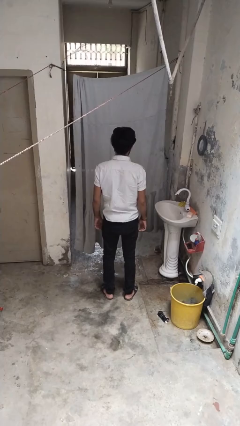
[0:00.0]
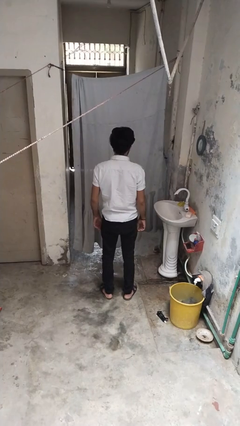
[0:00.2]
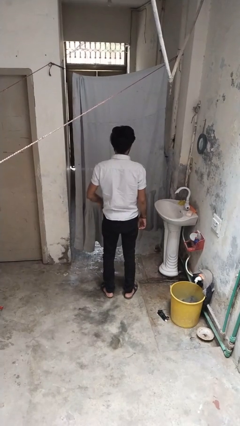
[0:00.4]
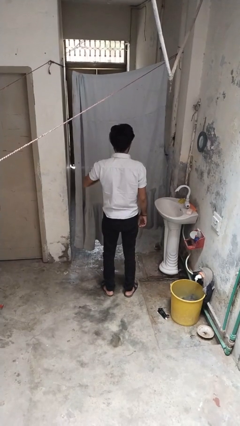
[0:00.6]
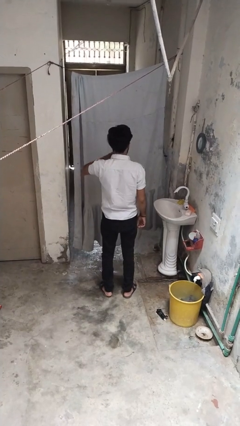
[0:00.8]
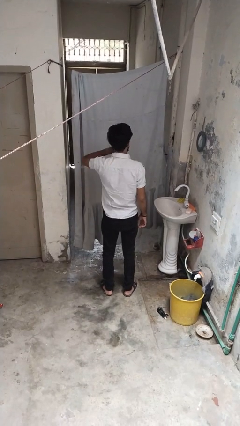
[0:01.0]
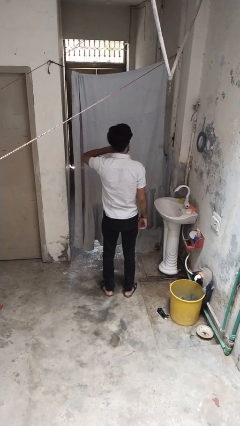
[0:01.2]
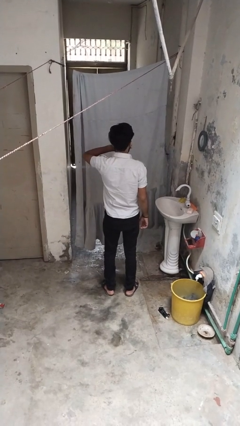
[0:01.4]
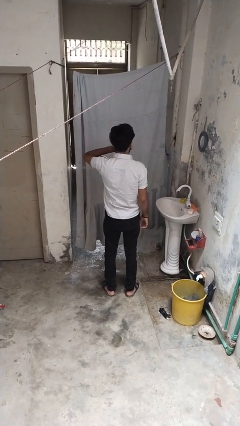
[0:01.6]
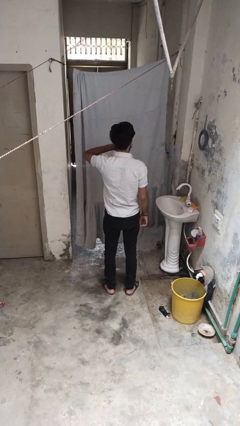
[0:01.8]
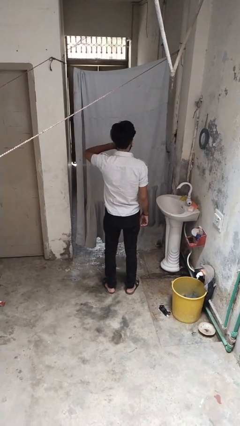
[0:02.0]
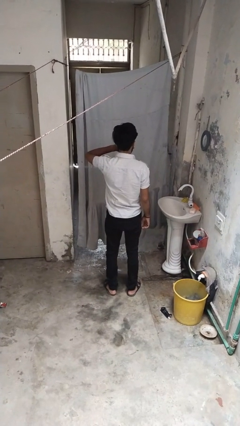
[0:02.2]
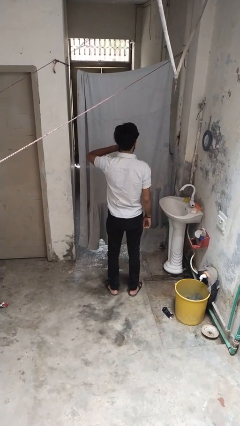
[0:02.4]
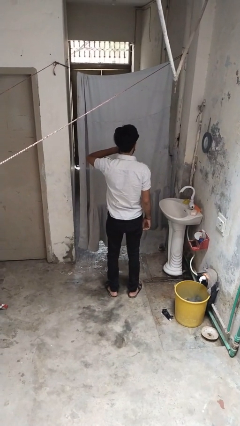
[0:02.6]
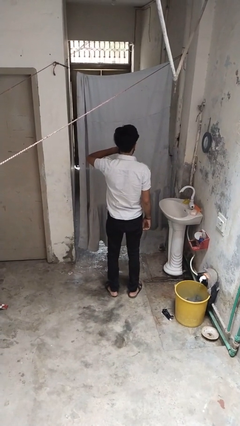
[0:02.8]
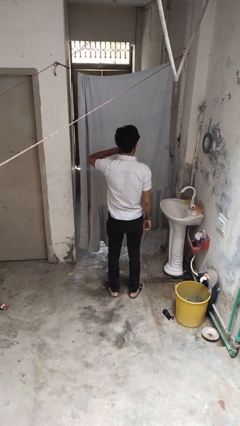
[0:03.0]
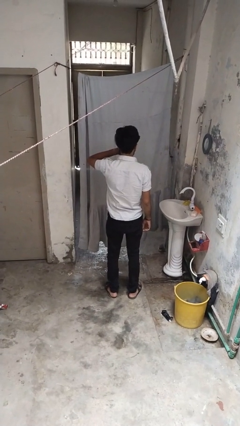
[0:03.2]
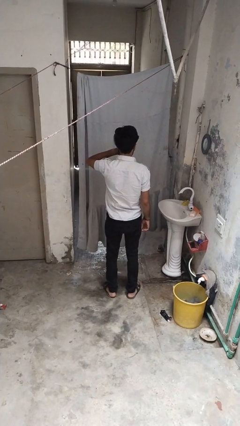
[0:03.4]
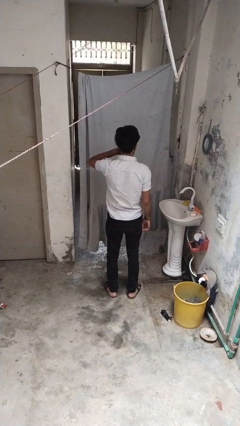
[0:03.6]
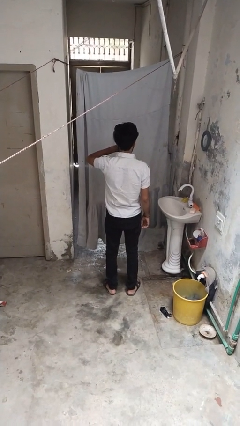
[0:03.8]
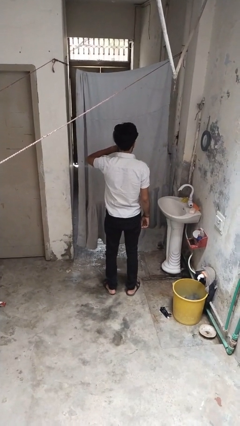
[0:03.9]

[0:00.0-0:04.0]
person yawns

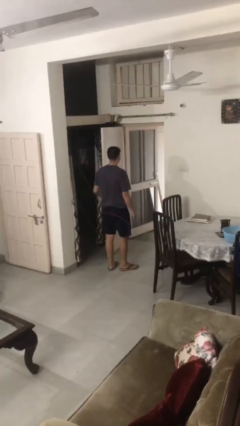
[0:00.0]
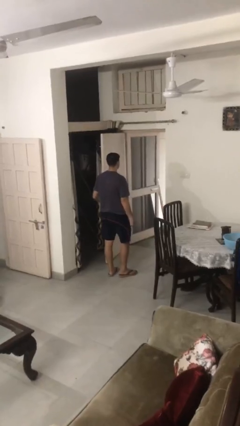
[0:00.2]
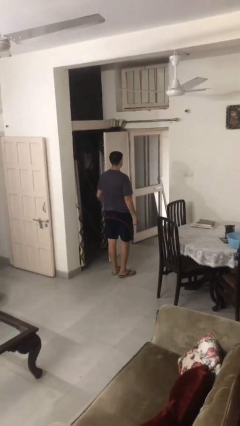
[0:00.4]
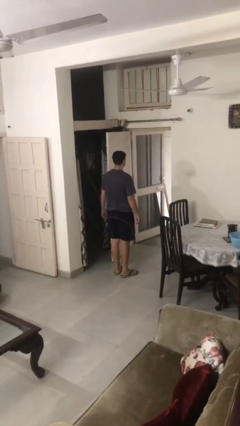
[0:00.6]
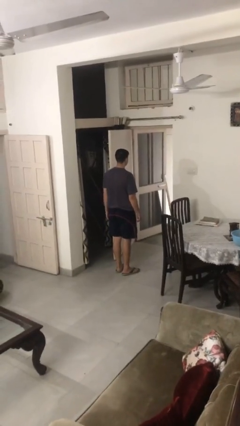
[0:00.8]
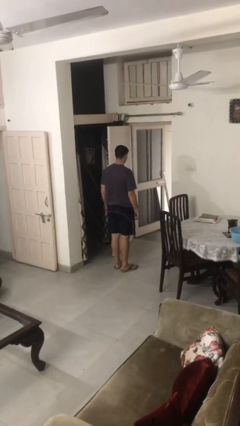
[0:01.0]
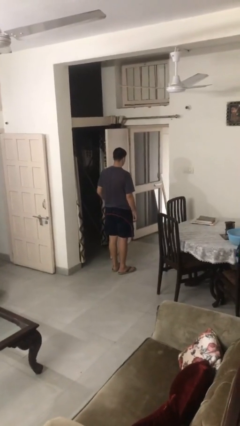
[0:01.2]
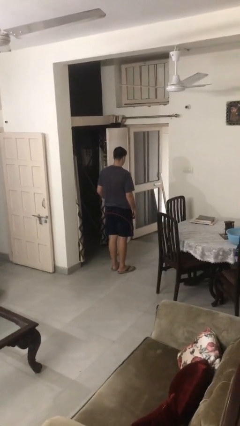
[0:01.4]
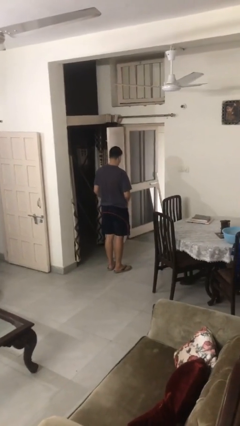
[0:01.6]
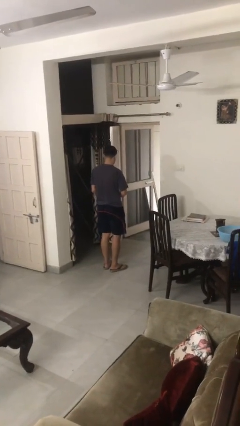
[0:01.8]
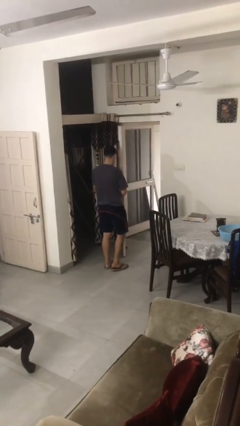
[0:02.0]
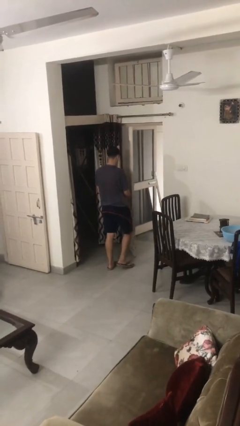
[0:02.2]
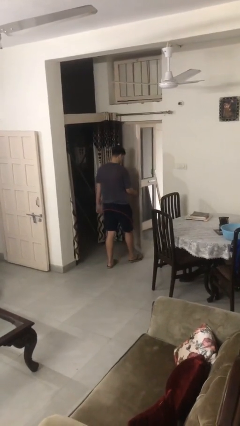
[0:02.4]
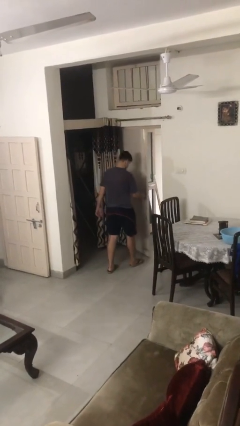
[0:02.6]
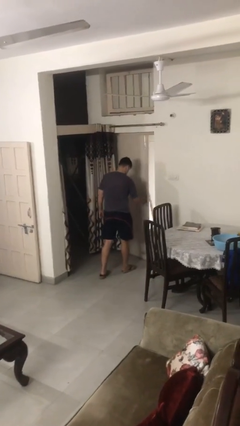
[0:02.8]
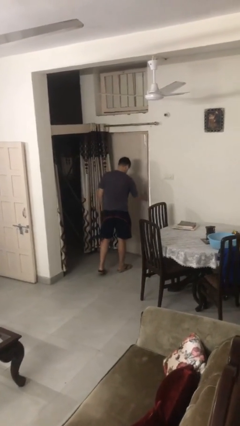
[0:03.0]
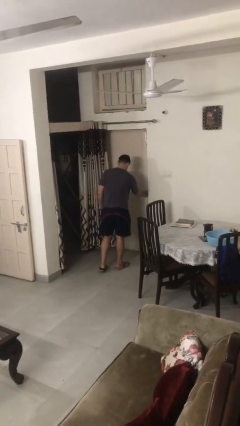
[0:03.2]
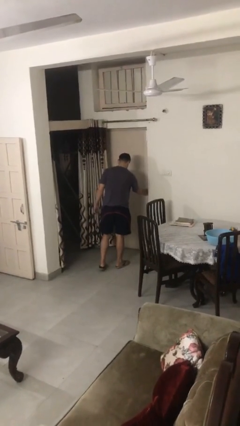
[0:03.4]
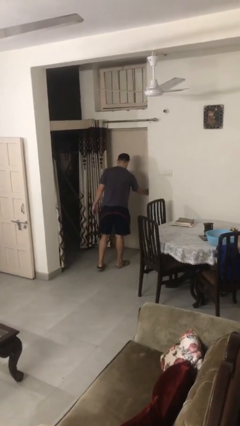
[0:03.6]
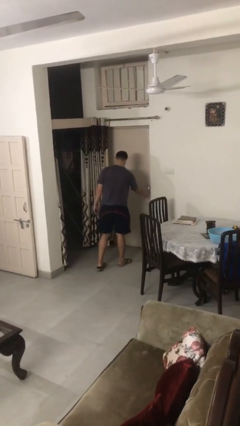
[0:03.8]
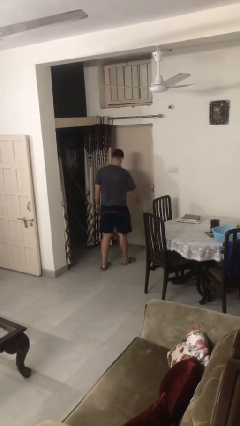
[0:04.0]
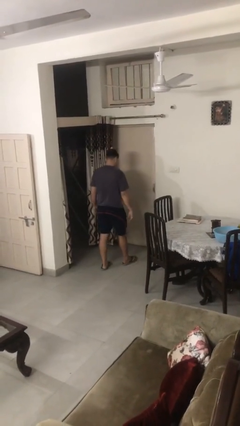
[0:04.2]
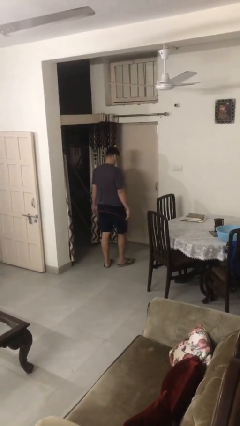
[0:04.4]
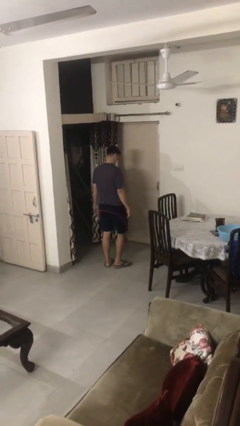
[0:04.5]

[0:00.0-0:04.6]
person closes facility door

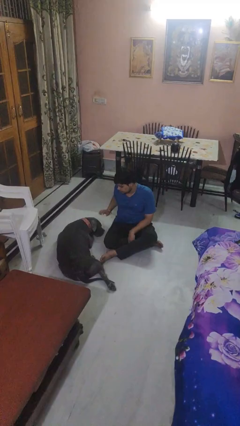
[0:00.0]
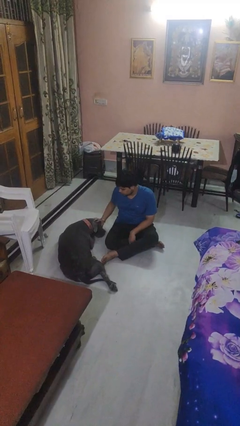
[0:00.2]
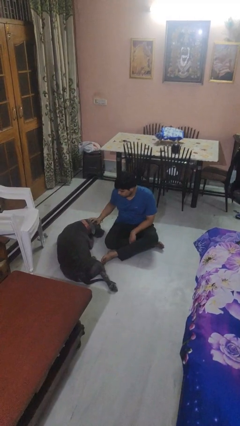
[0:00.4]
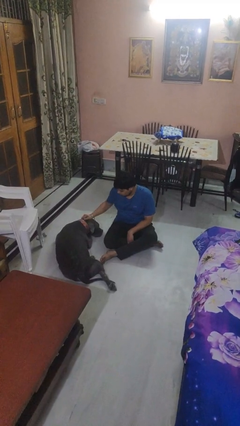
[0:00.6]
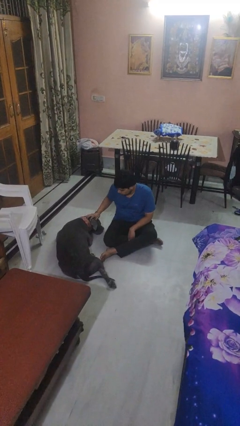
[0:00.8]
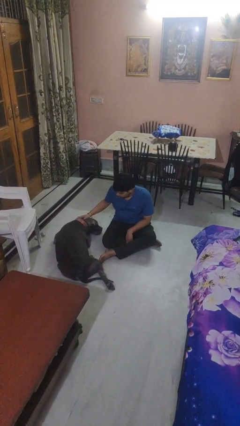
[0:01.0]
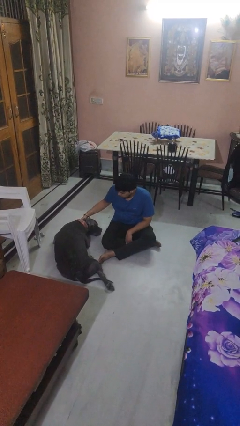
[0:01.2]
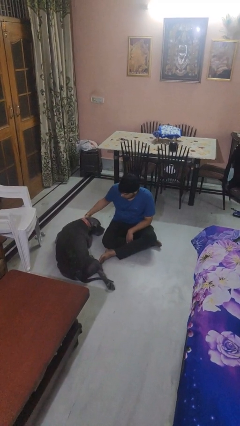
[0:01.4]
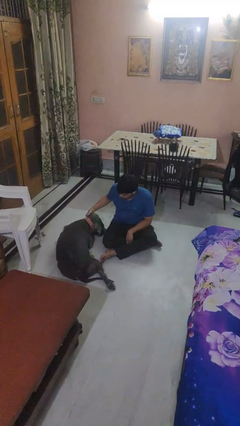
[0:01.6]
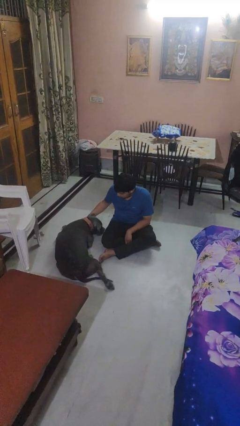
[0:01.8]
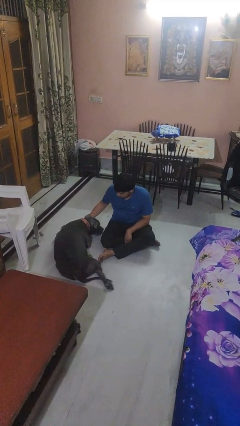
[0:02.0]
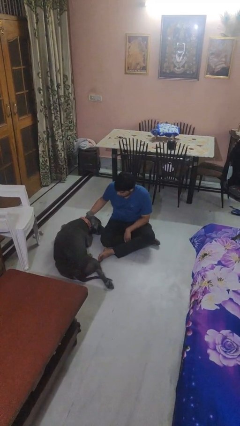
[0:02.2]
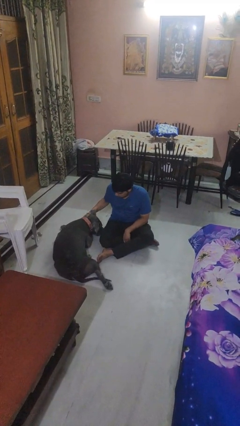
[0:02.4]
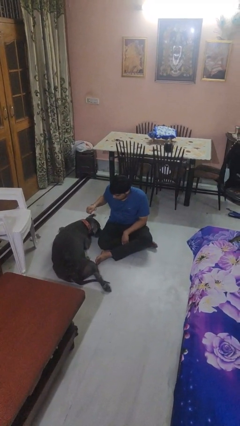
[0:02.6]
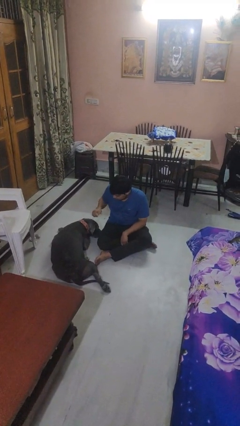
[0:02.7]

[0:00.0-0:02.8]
person pets dog

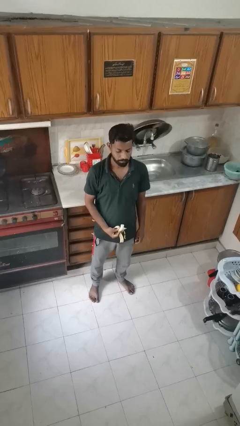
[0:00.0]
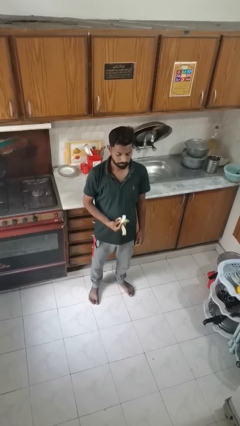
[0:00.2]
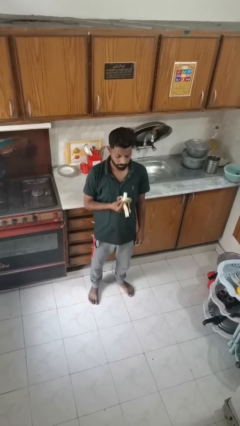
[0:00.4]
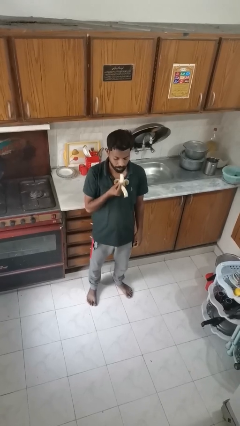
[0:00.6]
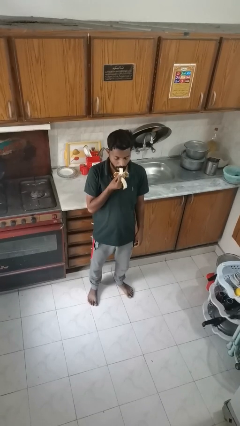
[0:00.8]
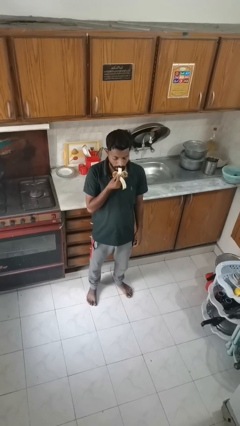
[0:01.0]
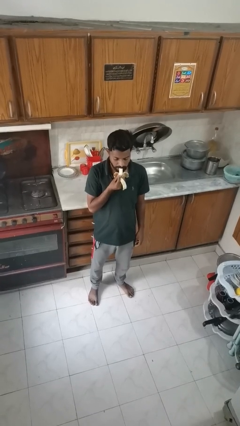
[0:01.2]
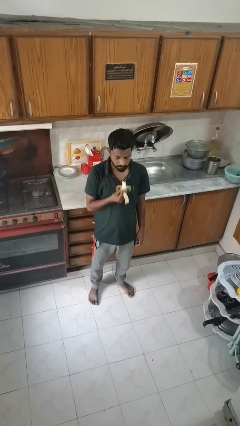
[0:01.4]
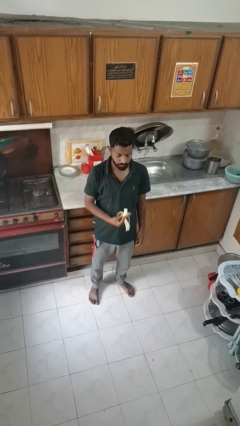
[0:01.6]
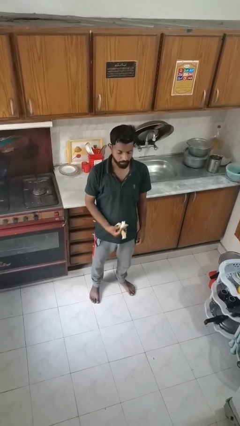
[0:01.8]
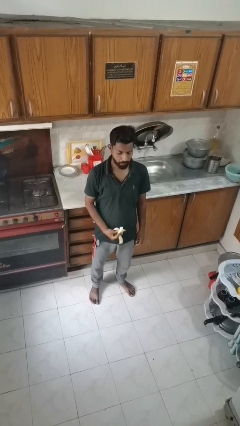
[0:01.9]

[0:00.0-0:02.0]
person eats banana

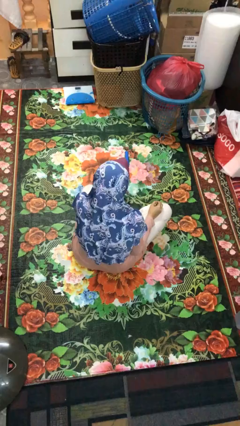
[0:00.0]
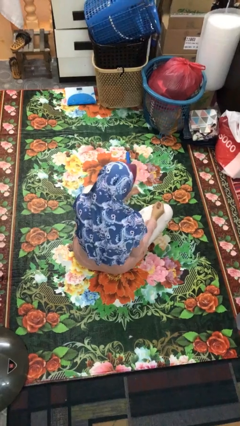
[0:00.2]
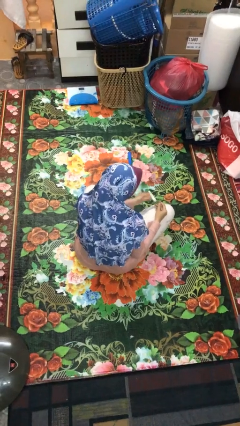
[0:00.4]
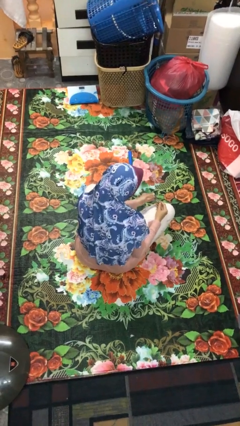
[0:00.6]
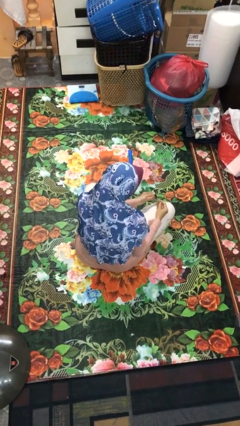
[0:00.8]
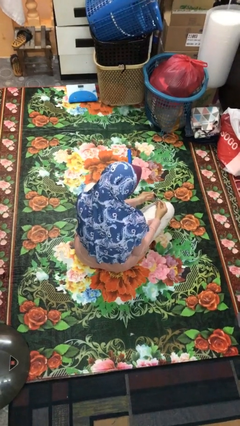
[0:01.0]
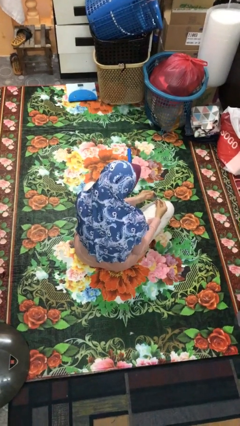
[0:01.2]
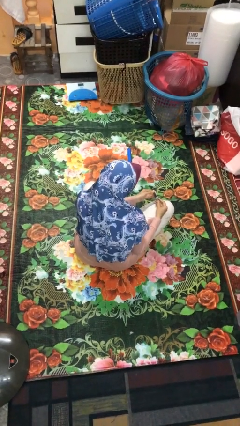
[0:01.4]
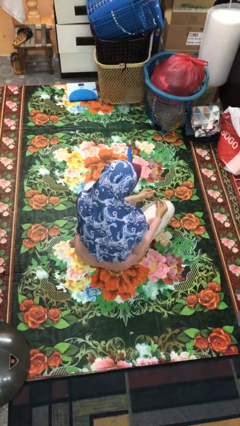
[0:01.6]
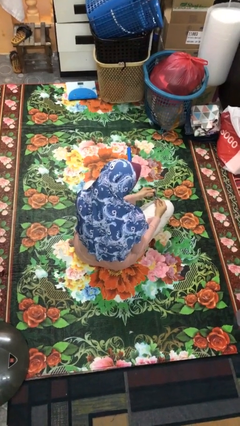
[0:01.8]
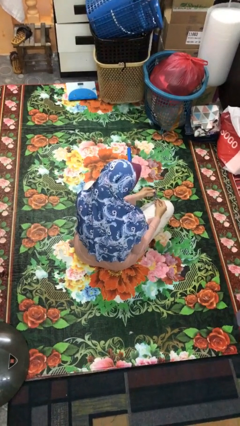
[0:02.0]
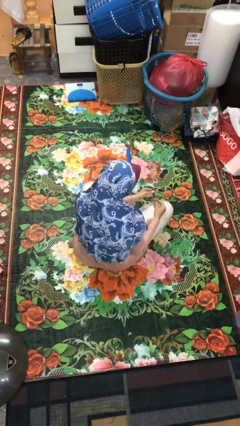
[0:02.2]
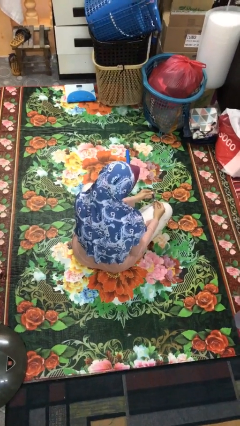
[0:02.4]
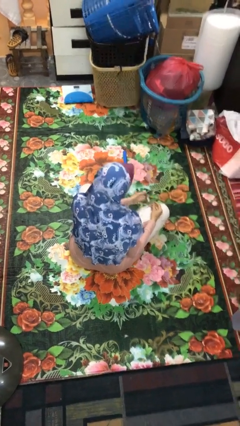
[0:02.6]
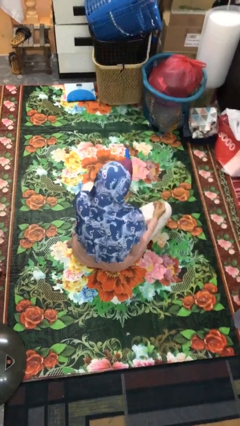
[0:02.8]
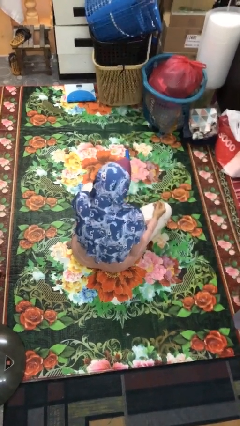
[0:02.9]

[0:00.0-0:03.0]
person clips fingernails

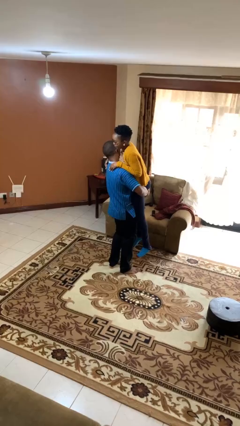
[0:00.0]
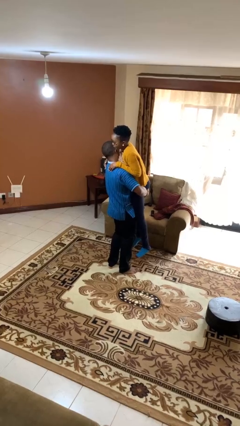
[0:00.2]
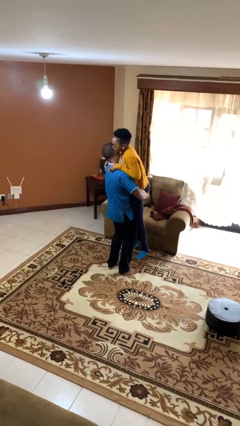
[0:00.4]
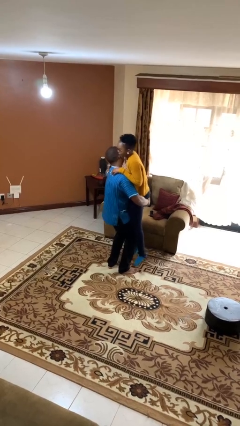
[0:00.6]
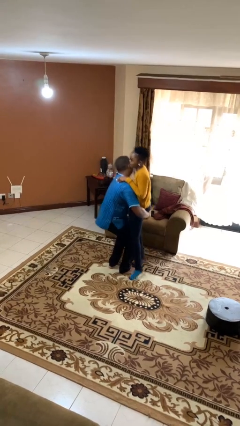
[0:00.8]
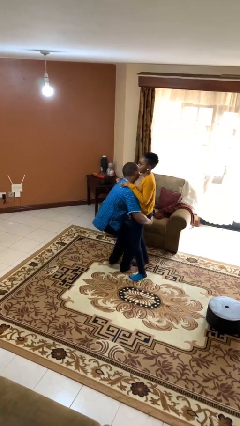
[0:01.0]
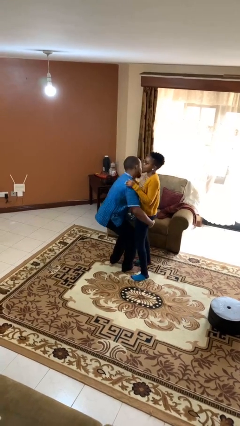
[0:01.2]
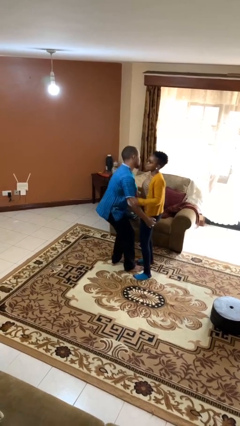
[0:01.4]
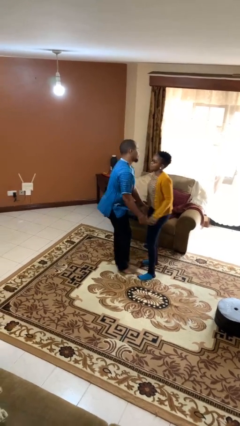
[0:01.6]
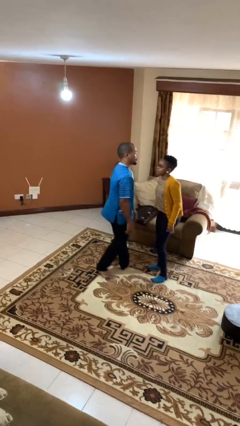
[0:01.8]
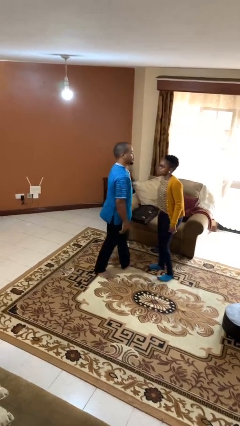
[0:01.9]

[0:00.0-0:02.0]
person puts down person
